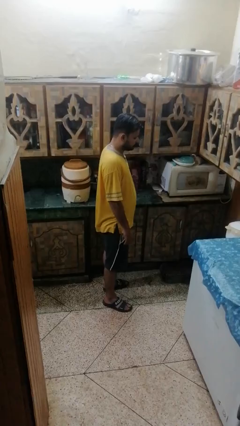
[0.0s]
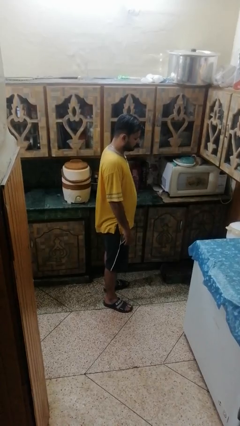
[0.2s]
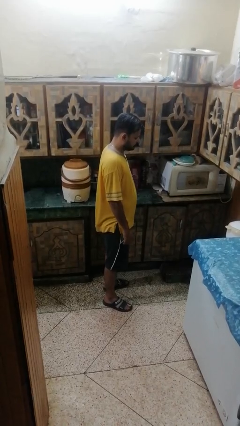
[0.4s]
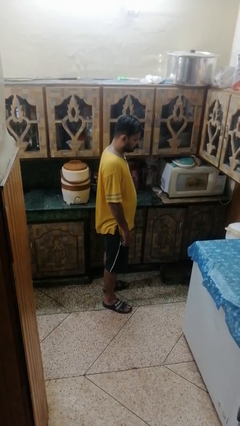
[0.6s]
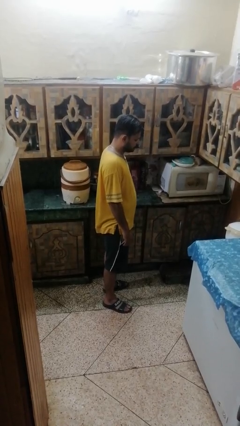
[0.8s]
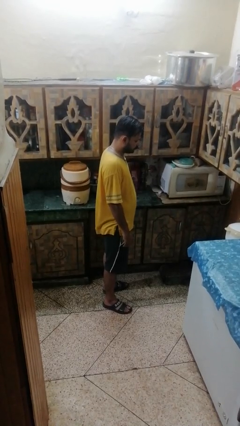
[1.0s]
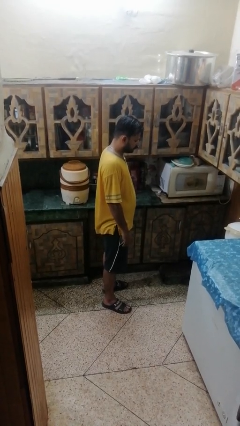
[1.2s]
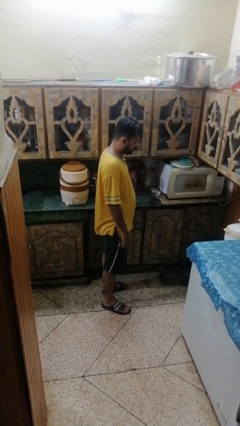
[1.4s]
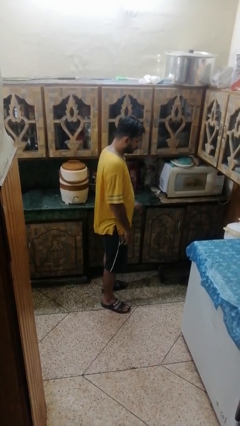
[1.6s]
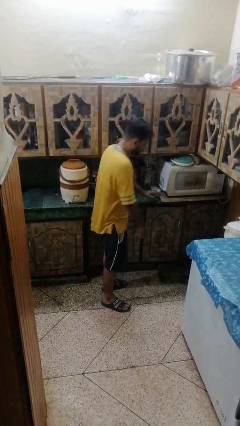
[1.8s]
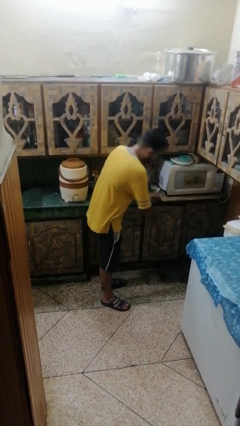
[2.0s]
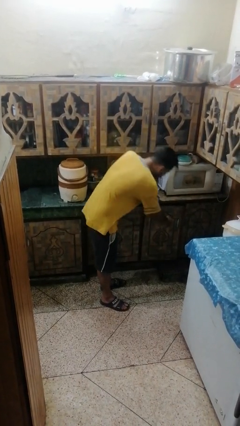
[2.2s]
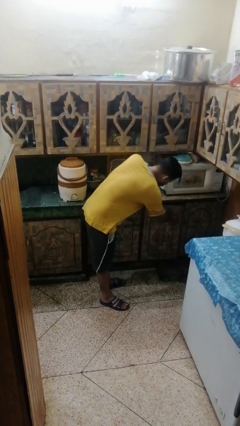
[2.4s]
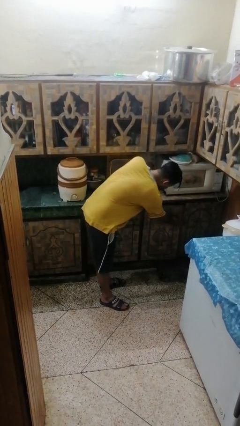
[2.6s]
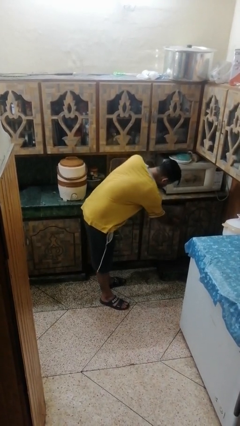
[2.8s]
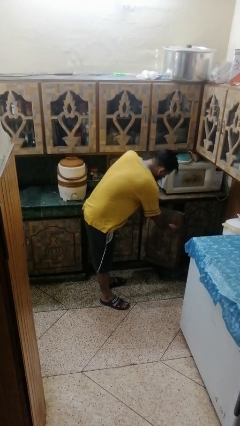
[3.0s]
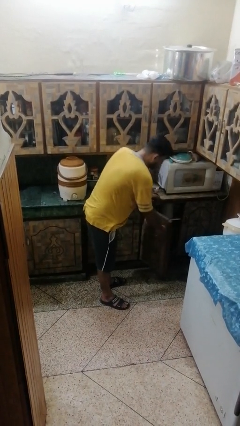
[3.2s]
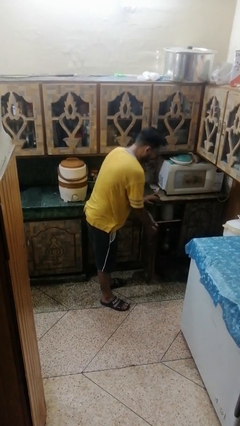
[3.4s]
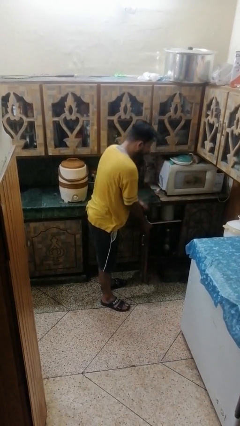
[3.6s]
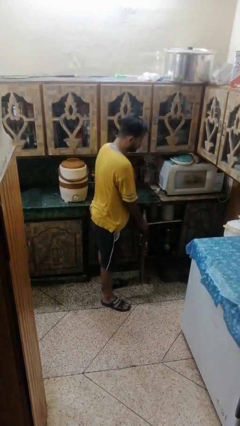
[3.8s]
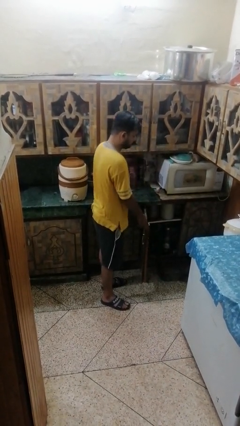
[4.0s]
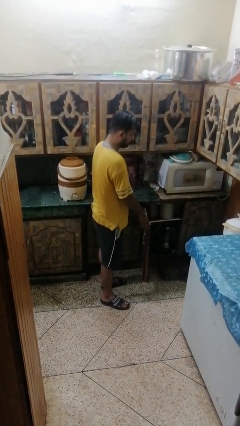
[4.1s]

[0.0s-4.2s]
person closes cabinet

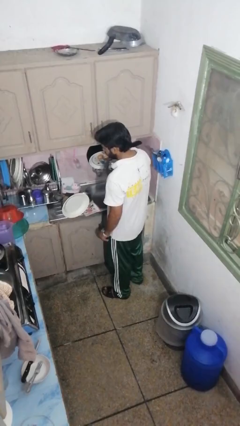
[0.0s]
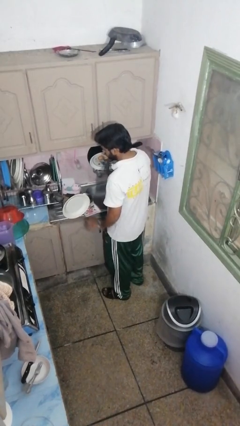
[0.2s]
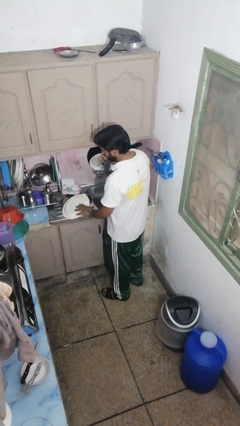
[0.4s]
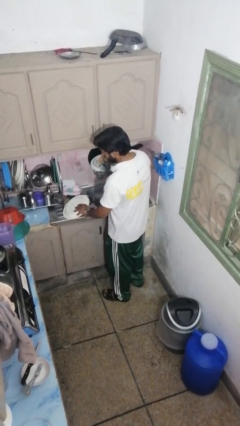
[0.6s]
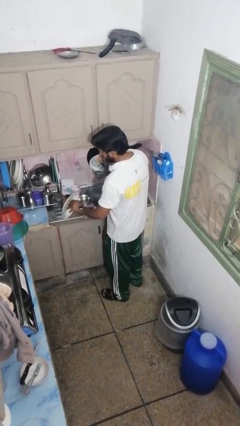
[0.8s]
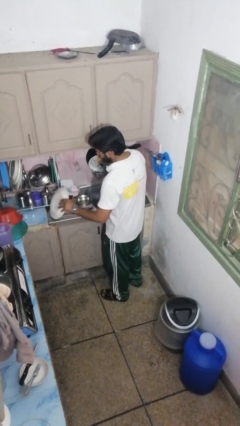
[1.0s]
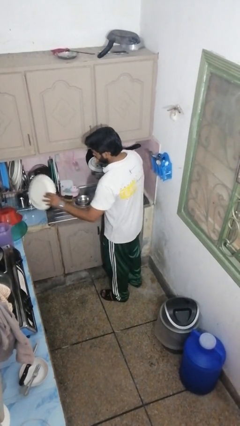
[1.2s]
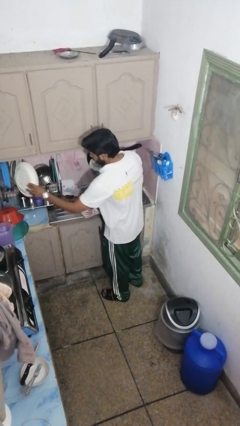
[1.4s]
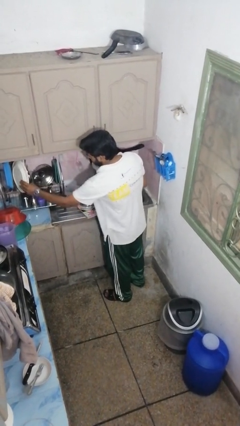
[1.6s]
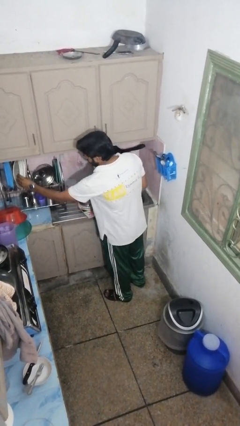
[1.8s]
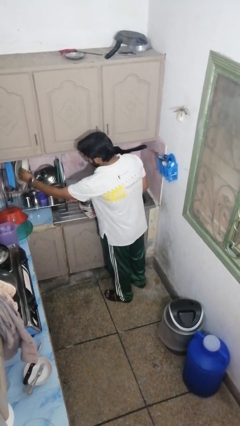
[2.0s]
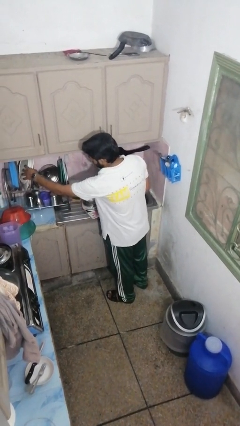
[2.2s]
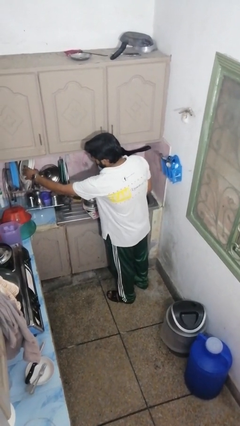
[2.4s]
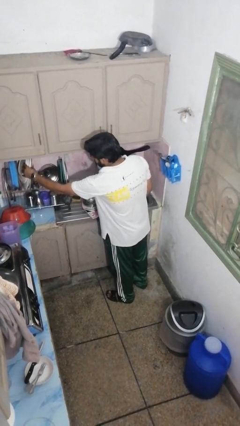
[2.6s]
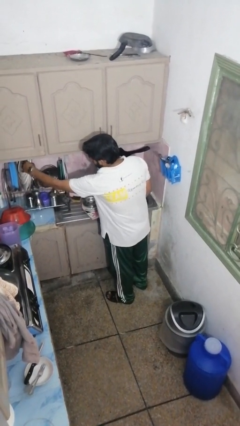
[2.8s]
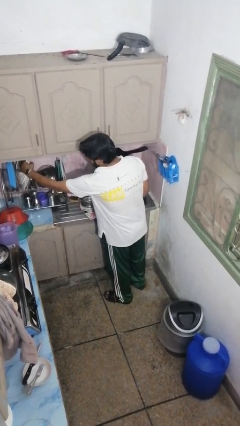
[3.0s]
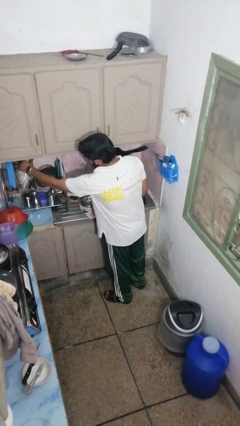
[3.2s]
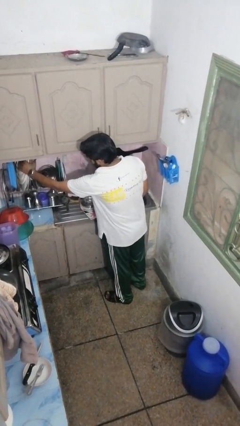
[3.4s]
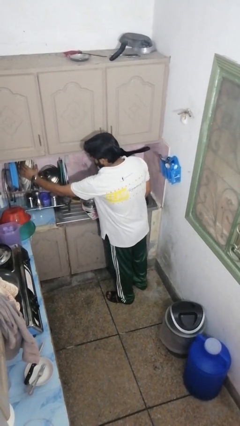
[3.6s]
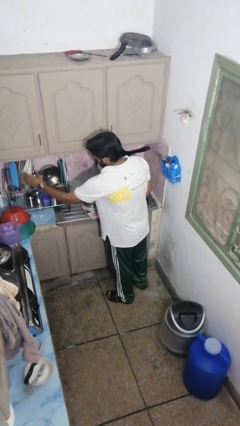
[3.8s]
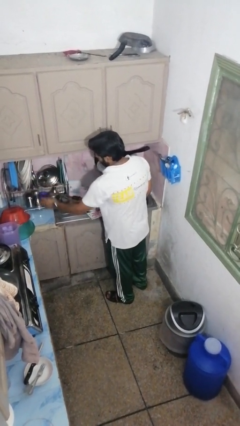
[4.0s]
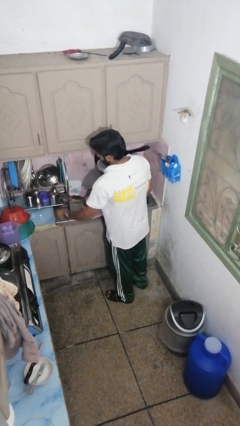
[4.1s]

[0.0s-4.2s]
person loads dishwasher

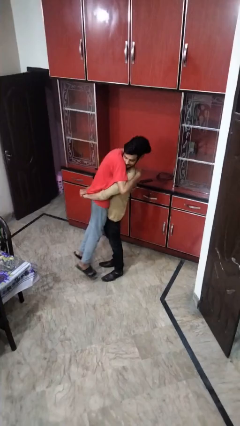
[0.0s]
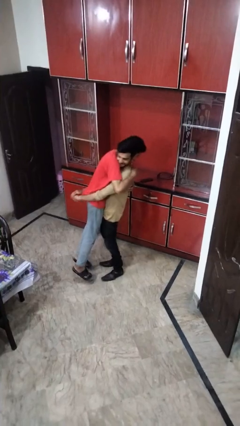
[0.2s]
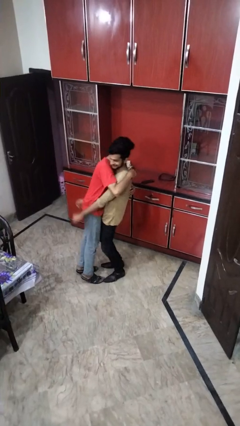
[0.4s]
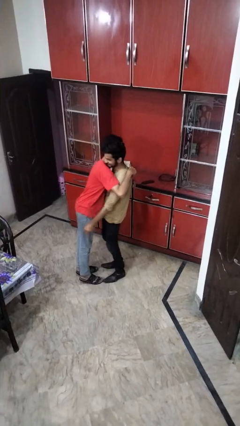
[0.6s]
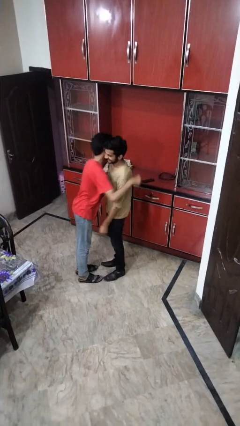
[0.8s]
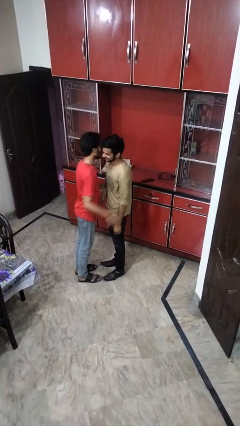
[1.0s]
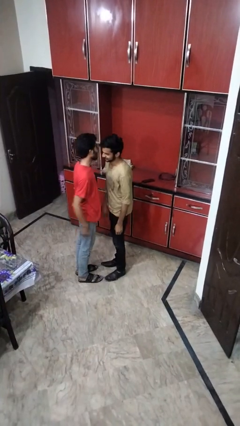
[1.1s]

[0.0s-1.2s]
person puts down person

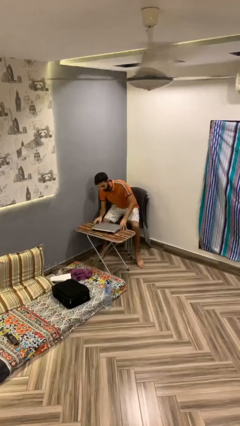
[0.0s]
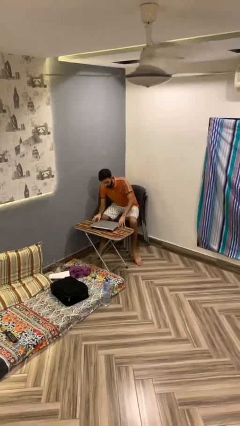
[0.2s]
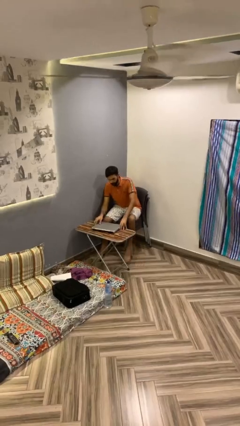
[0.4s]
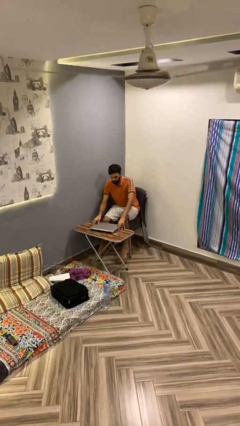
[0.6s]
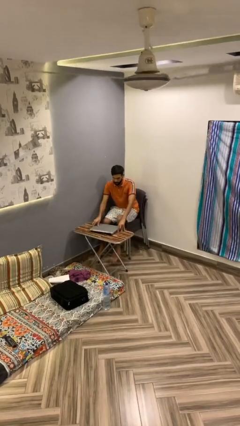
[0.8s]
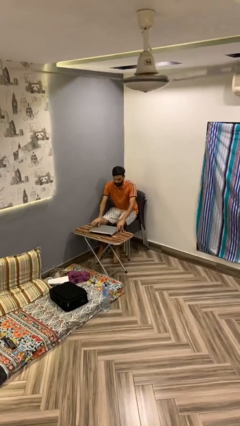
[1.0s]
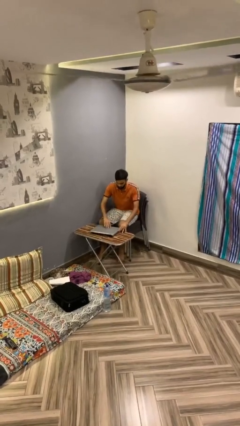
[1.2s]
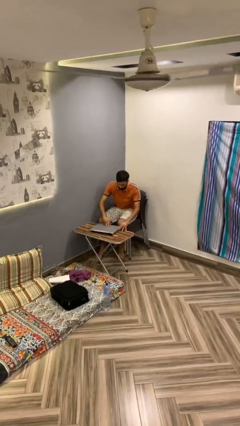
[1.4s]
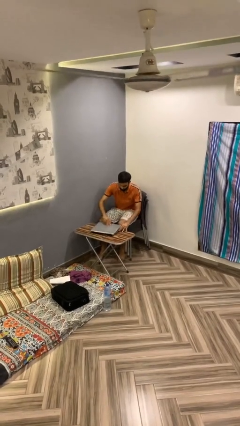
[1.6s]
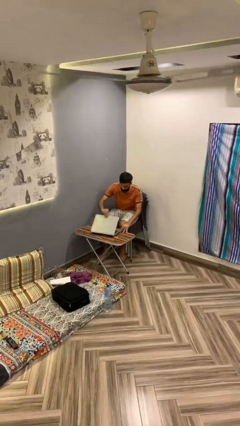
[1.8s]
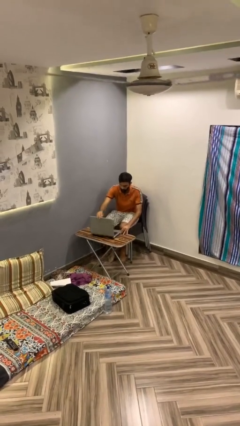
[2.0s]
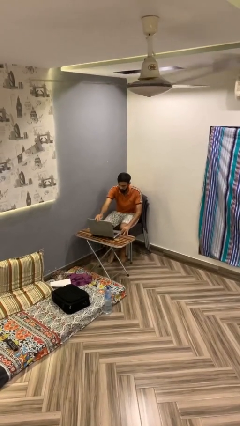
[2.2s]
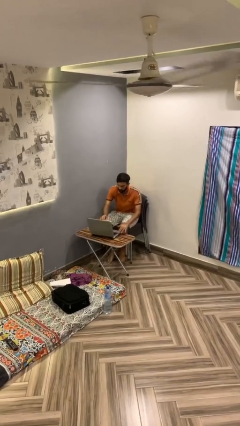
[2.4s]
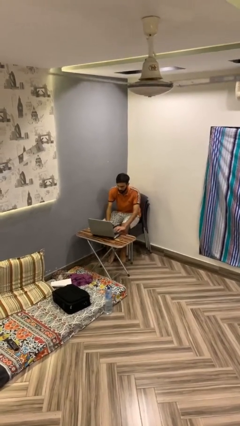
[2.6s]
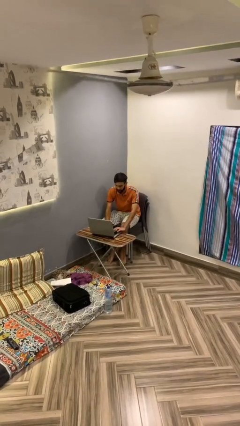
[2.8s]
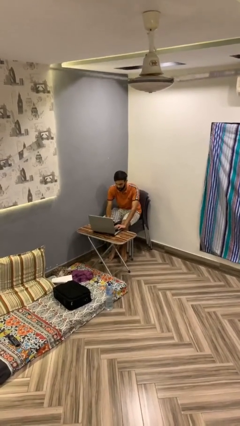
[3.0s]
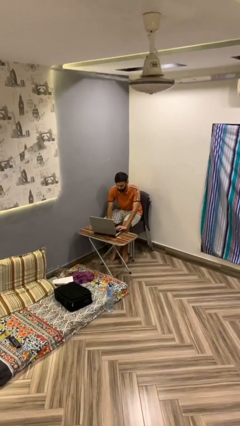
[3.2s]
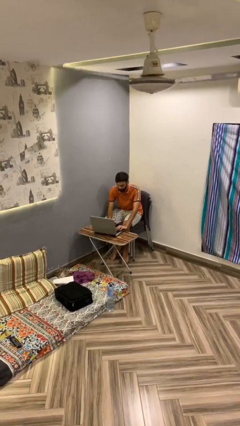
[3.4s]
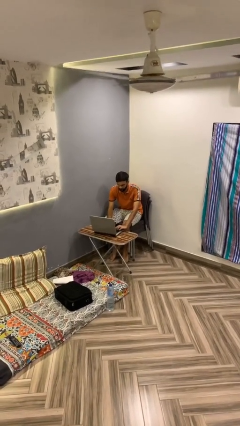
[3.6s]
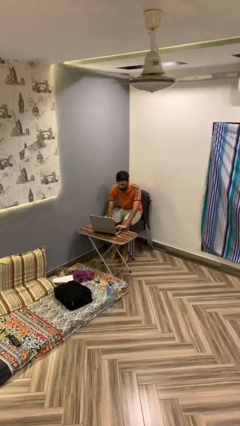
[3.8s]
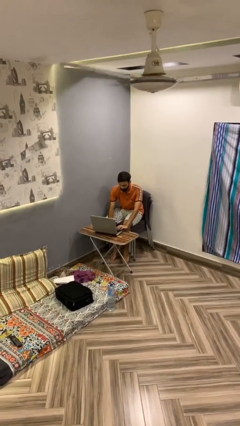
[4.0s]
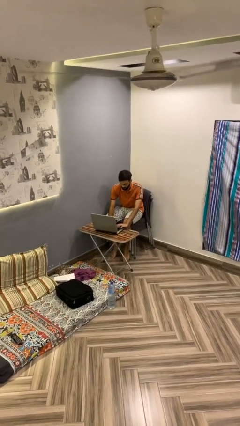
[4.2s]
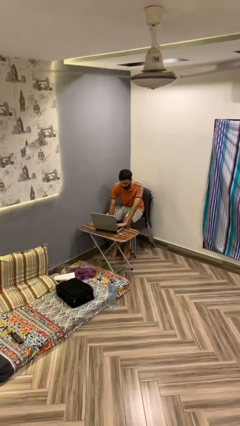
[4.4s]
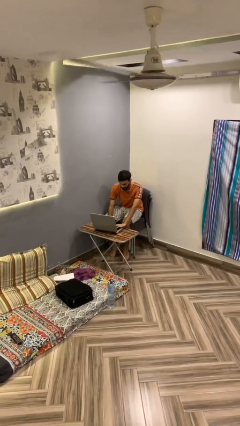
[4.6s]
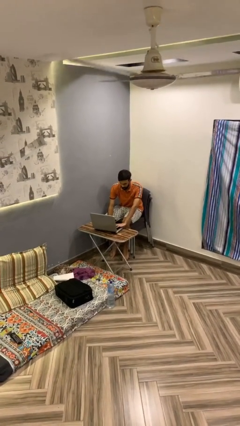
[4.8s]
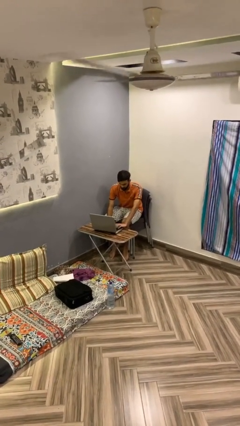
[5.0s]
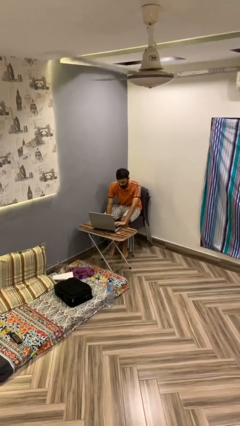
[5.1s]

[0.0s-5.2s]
person interacts with laptop

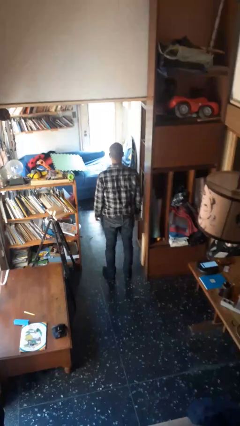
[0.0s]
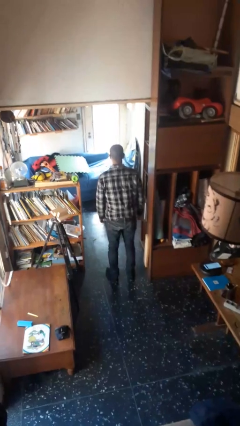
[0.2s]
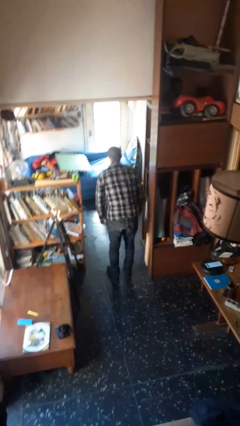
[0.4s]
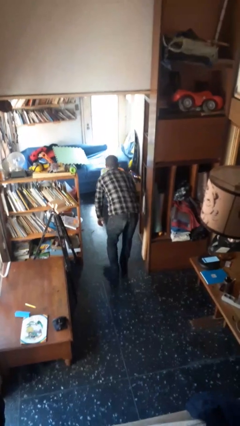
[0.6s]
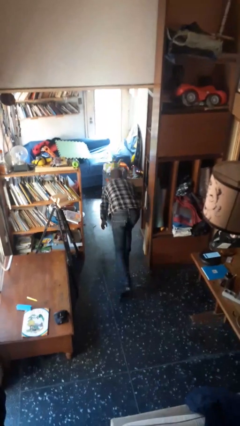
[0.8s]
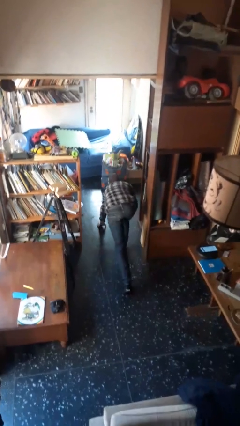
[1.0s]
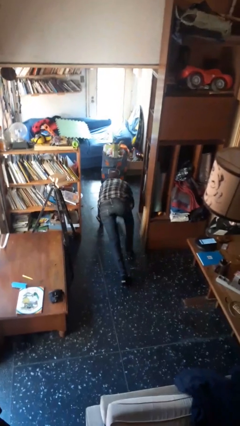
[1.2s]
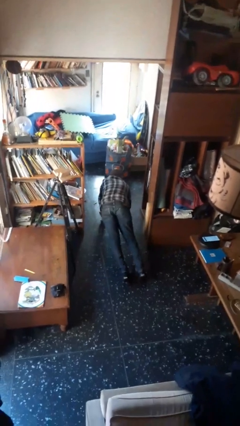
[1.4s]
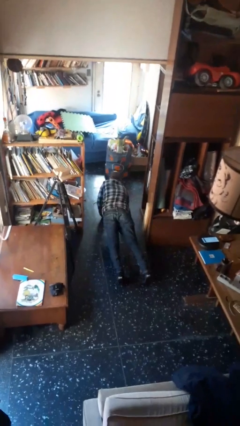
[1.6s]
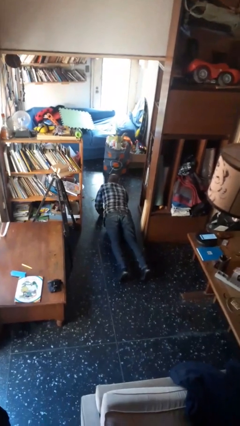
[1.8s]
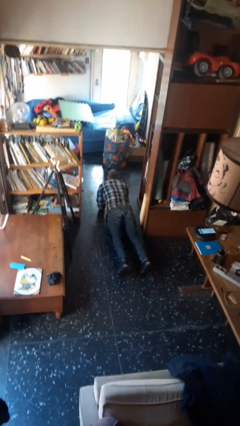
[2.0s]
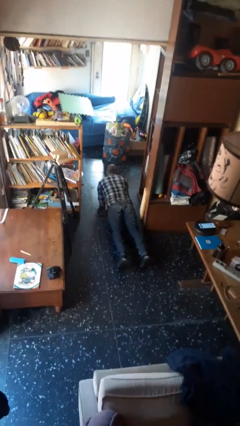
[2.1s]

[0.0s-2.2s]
person exercises with plank

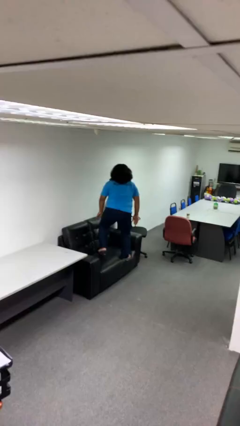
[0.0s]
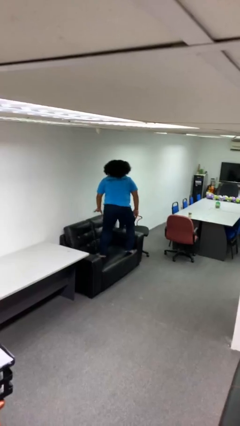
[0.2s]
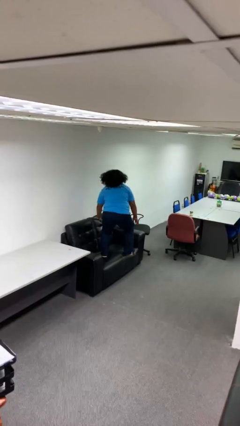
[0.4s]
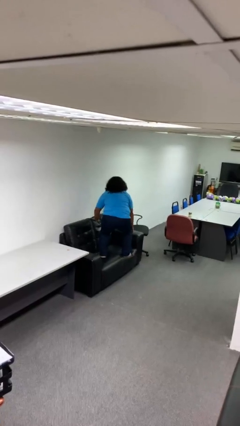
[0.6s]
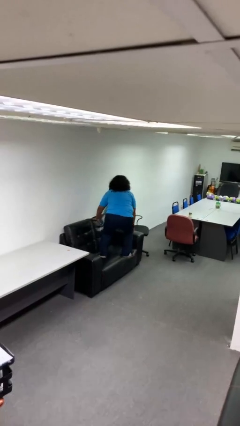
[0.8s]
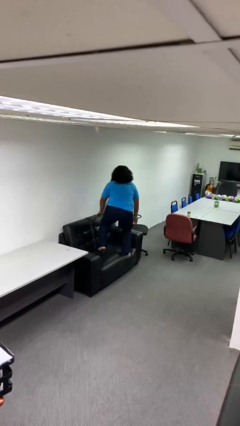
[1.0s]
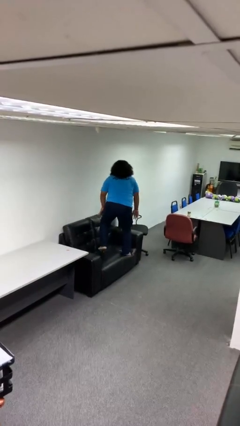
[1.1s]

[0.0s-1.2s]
person jumps on couch
